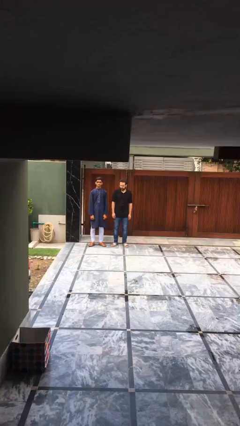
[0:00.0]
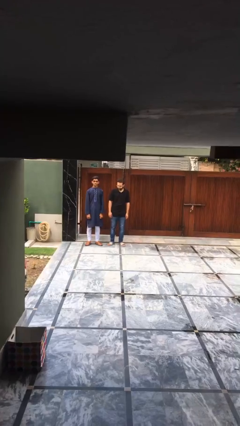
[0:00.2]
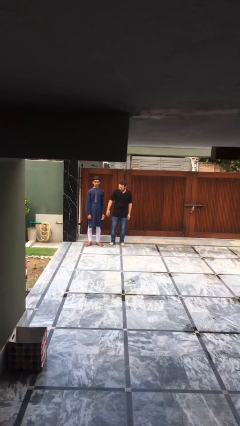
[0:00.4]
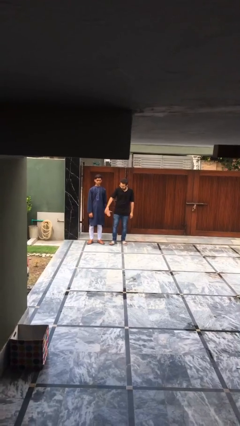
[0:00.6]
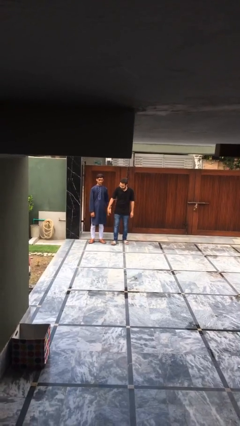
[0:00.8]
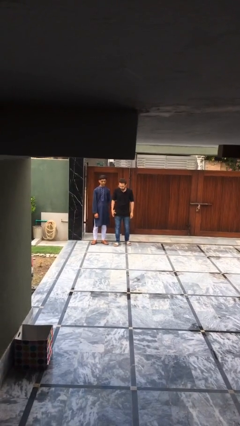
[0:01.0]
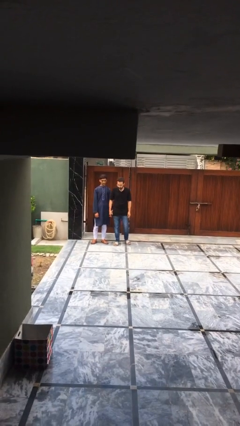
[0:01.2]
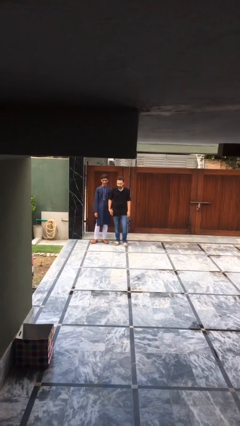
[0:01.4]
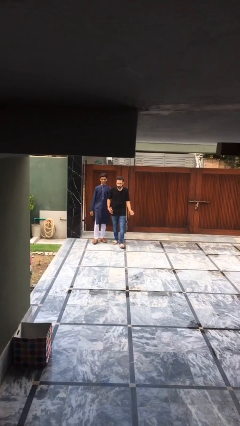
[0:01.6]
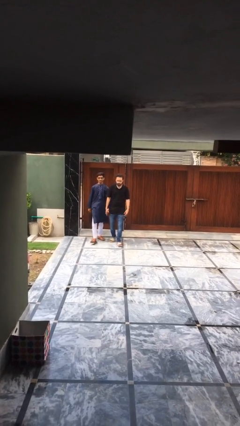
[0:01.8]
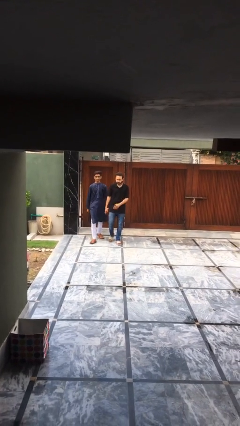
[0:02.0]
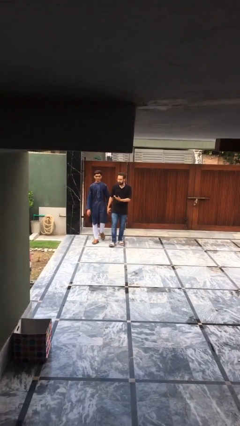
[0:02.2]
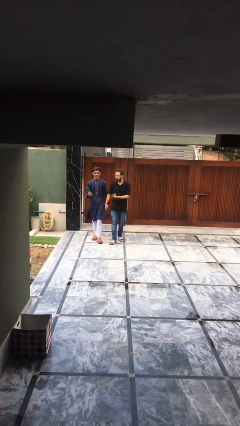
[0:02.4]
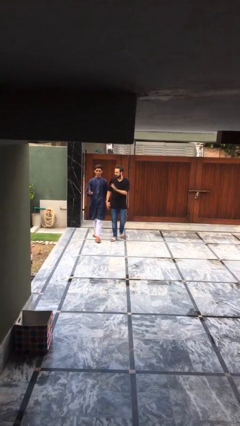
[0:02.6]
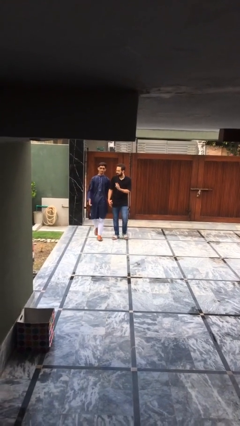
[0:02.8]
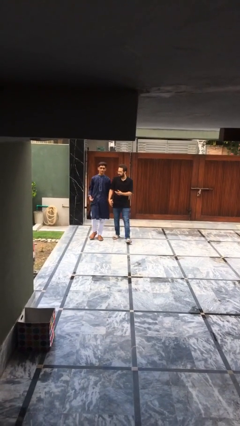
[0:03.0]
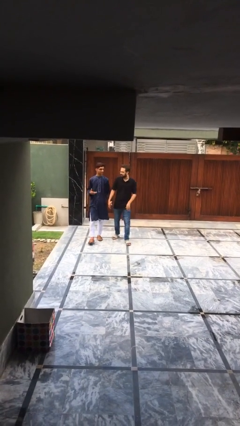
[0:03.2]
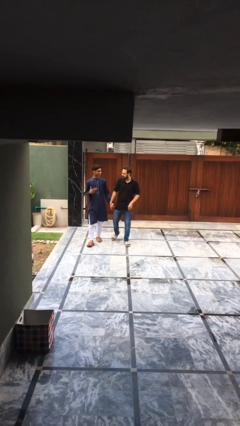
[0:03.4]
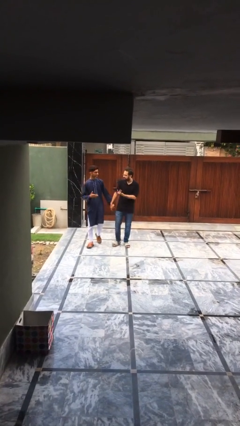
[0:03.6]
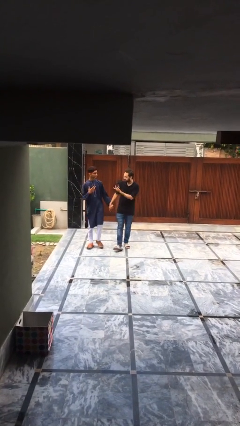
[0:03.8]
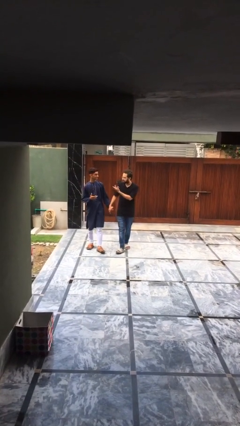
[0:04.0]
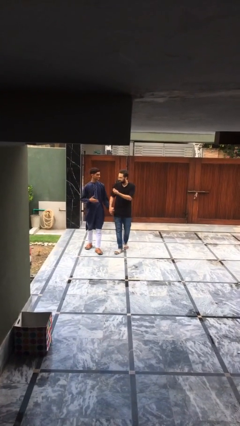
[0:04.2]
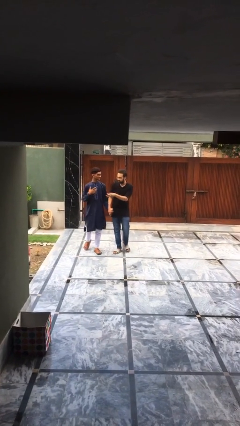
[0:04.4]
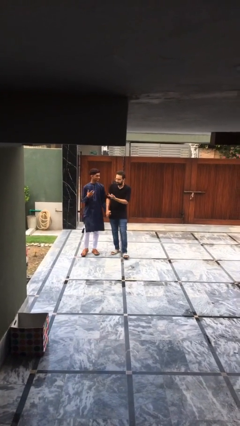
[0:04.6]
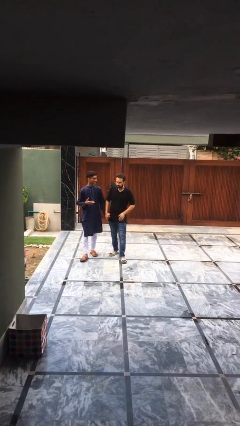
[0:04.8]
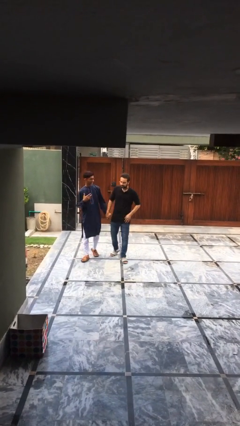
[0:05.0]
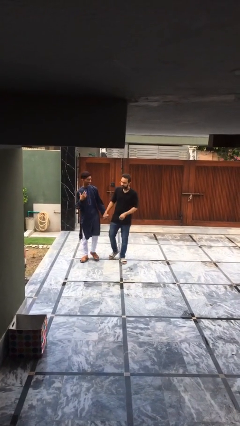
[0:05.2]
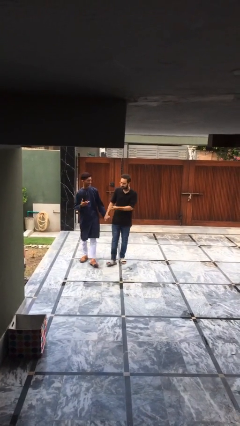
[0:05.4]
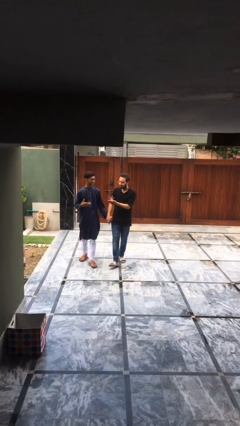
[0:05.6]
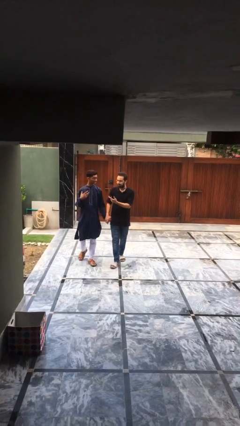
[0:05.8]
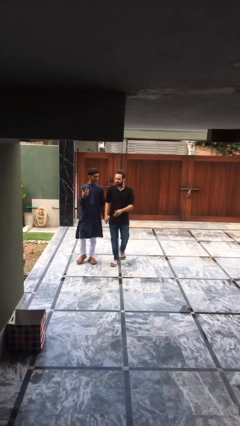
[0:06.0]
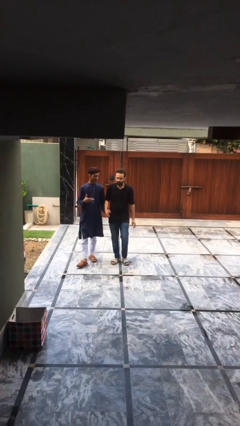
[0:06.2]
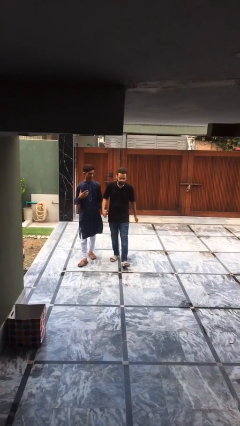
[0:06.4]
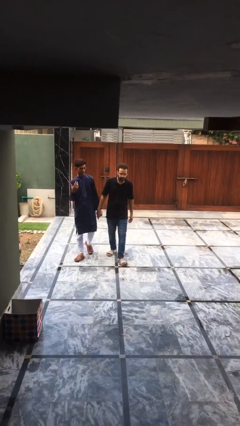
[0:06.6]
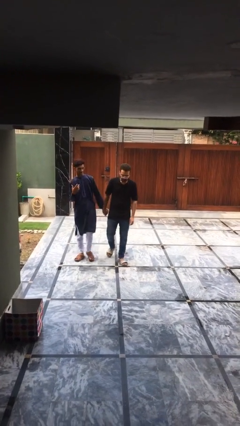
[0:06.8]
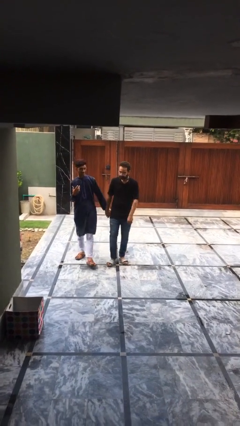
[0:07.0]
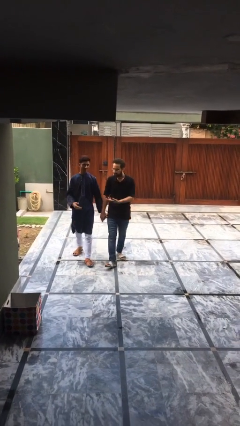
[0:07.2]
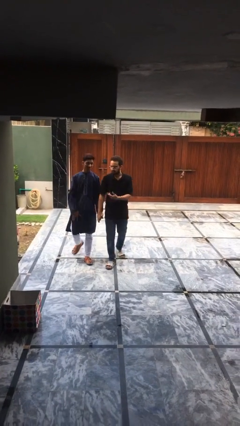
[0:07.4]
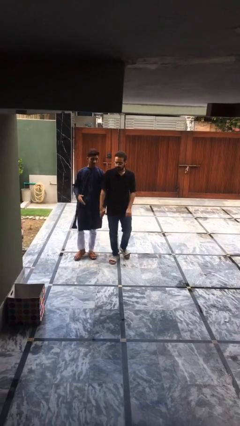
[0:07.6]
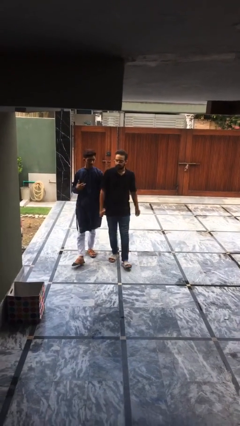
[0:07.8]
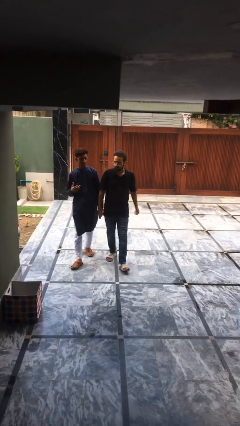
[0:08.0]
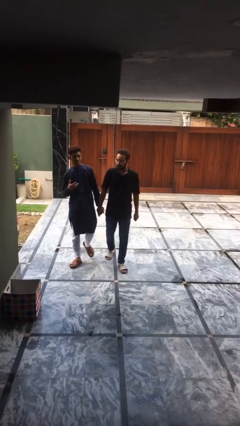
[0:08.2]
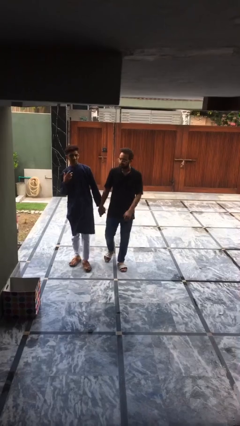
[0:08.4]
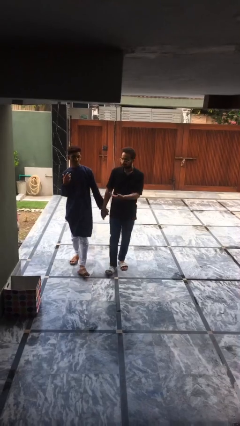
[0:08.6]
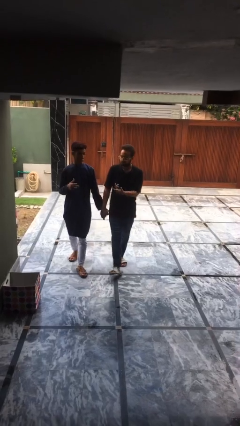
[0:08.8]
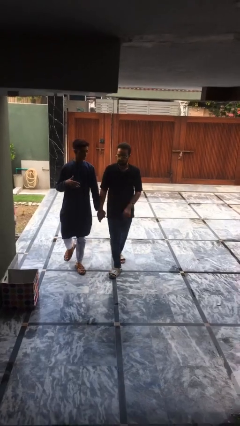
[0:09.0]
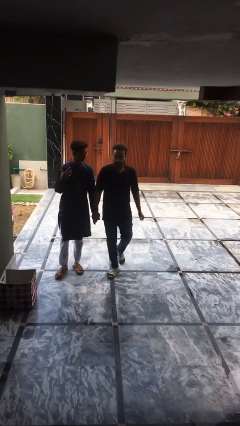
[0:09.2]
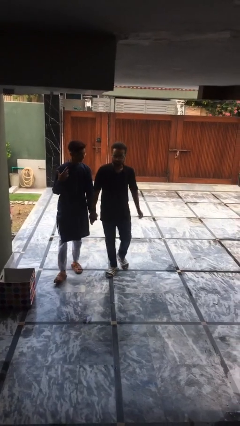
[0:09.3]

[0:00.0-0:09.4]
person holds hand

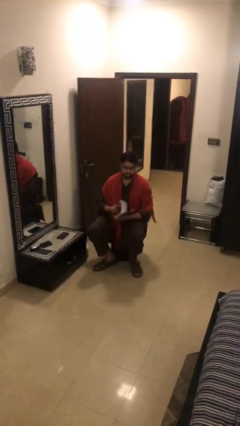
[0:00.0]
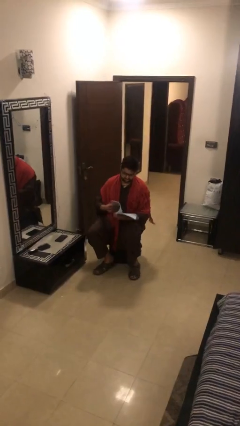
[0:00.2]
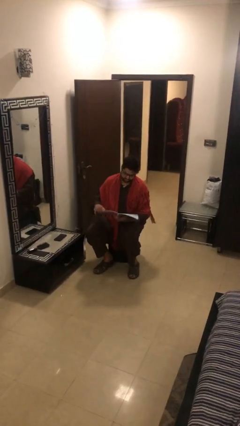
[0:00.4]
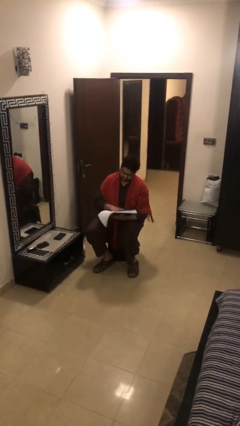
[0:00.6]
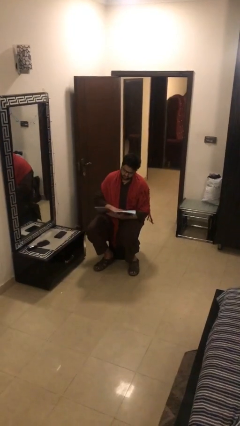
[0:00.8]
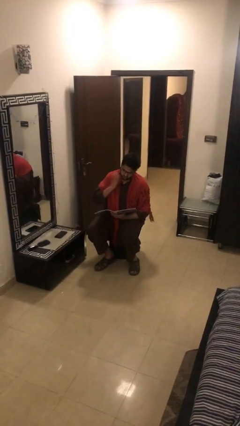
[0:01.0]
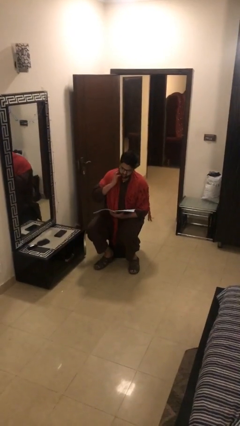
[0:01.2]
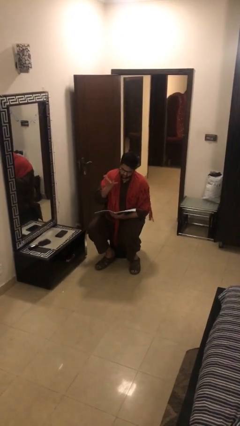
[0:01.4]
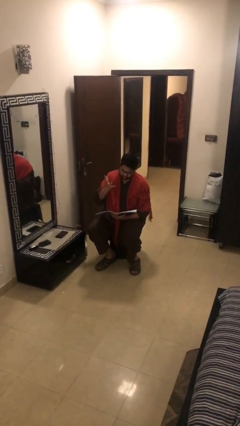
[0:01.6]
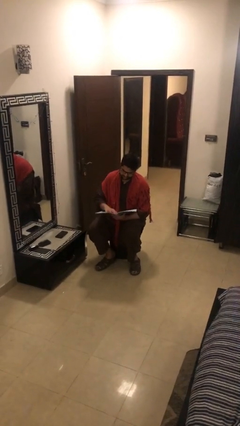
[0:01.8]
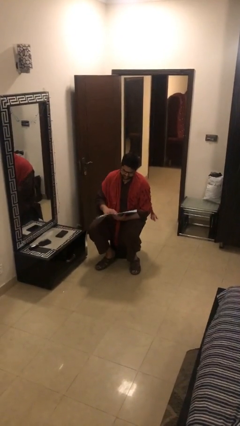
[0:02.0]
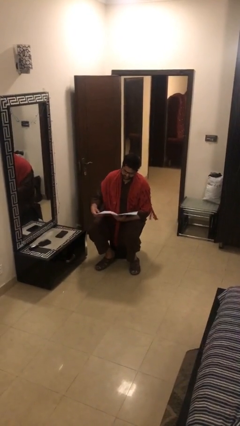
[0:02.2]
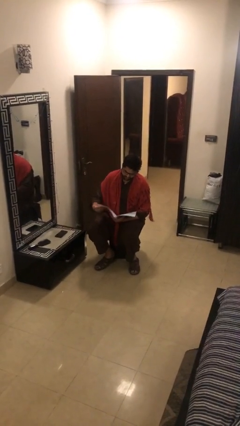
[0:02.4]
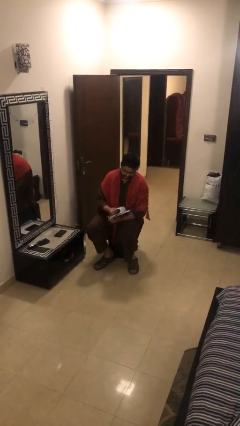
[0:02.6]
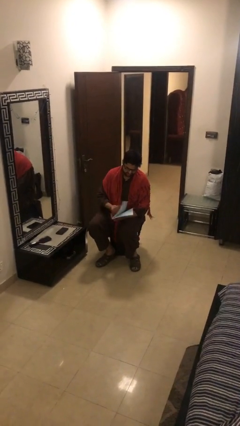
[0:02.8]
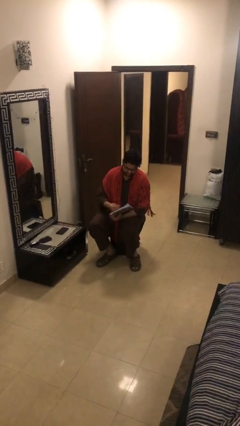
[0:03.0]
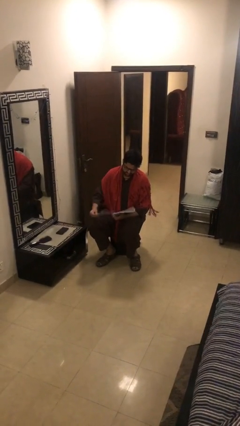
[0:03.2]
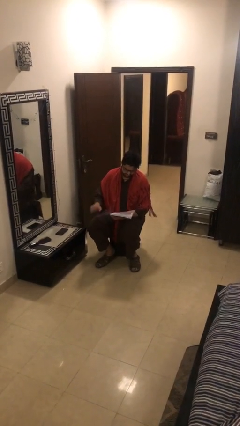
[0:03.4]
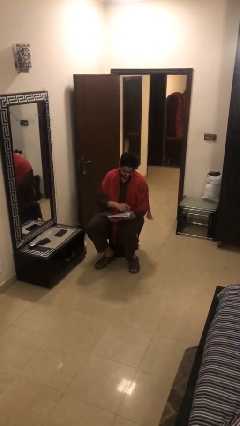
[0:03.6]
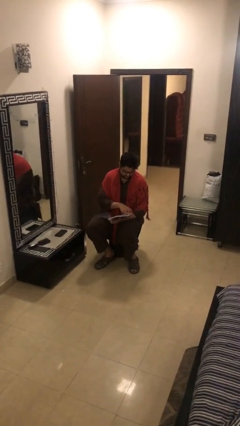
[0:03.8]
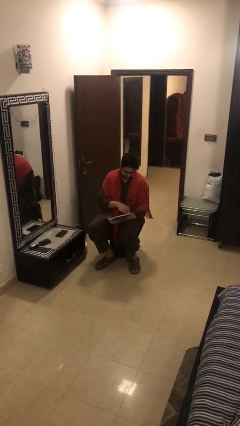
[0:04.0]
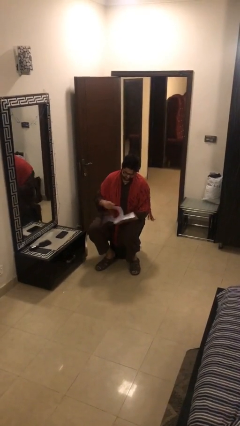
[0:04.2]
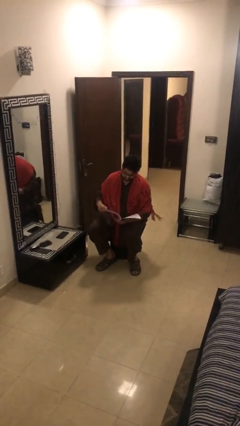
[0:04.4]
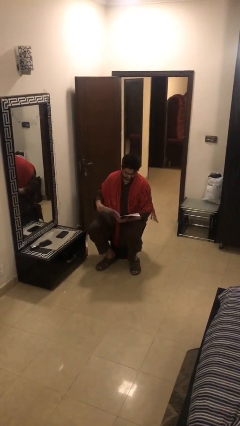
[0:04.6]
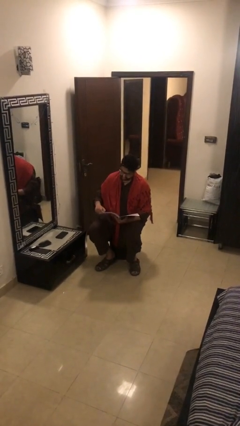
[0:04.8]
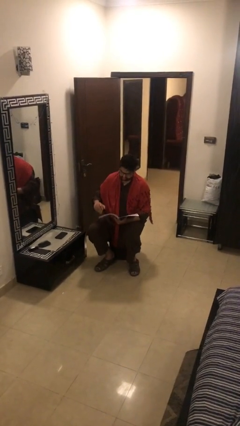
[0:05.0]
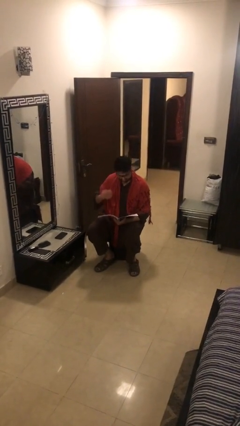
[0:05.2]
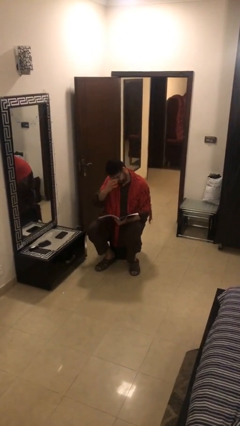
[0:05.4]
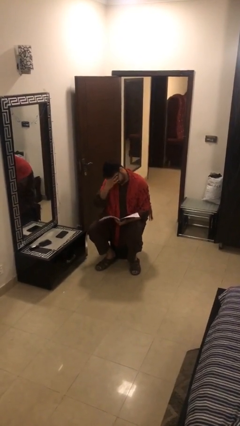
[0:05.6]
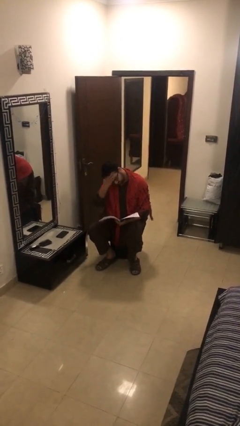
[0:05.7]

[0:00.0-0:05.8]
person reads document

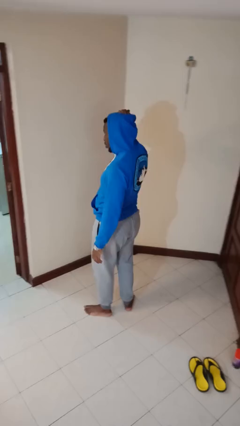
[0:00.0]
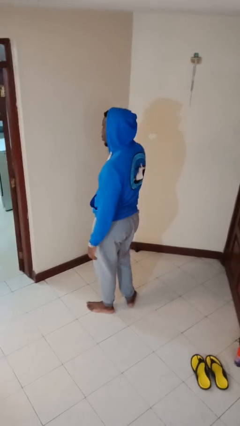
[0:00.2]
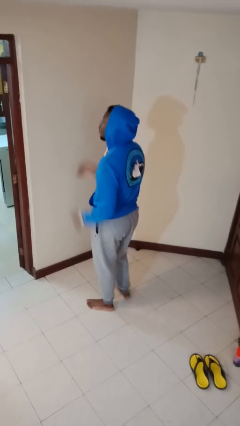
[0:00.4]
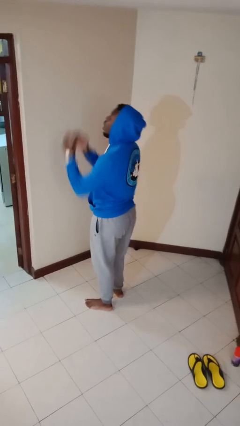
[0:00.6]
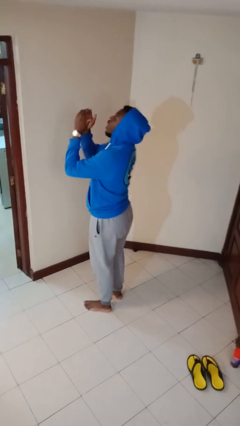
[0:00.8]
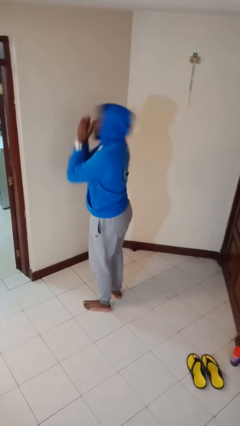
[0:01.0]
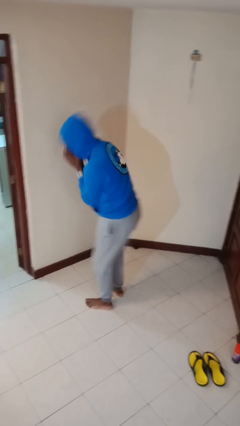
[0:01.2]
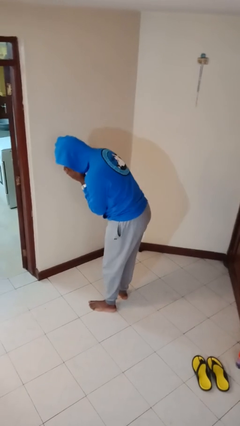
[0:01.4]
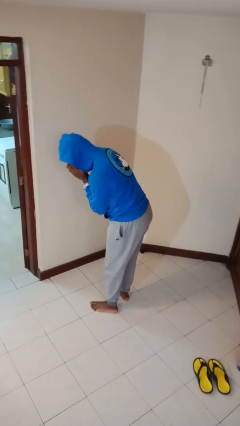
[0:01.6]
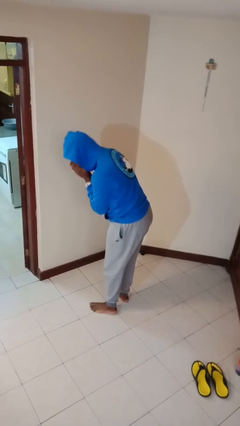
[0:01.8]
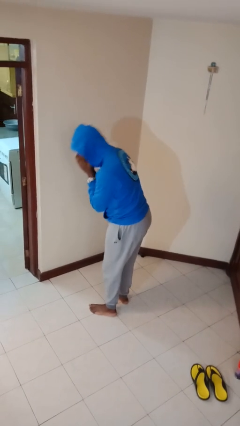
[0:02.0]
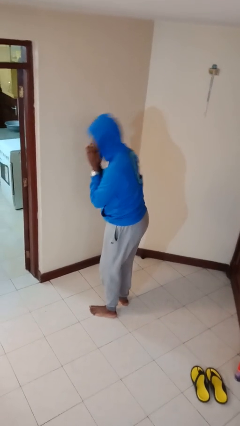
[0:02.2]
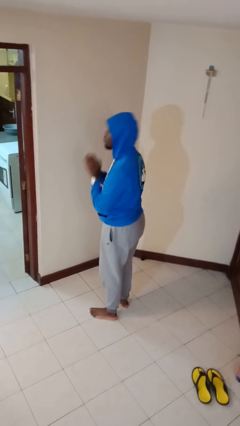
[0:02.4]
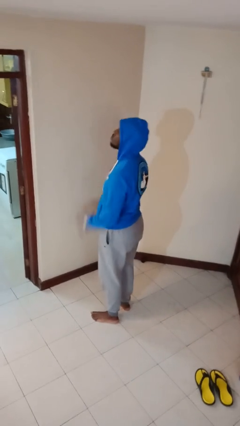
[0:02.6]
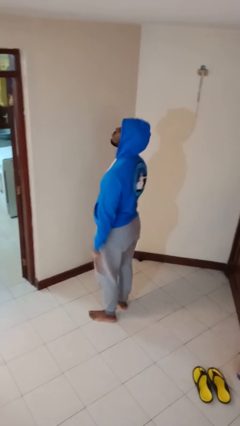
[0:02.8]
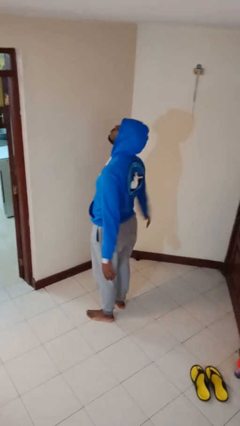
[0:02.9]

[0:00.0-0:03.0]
person sneezes into hand
